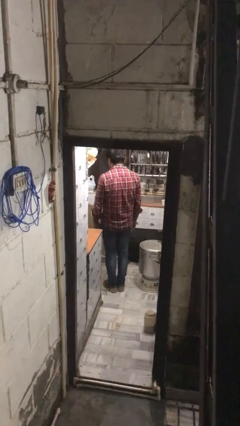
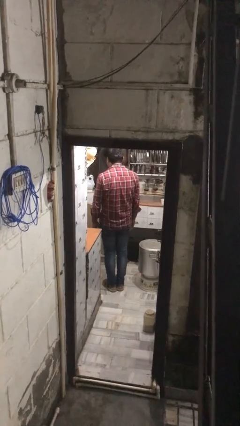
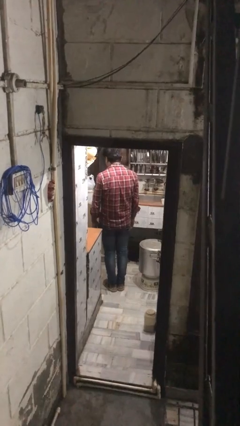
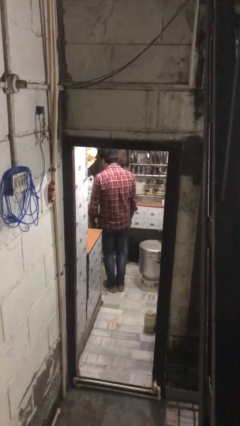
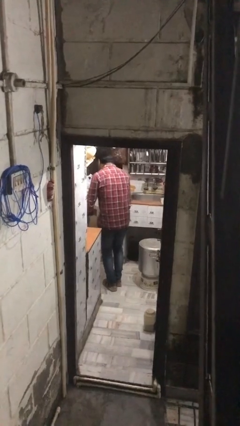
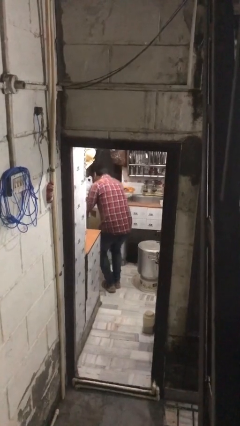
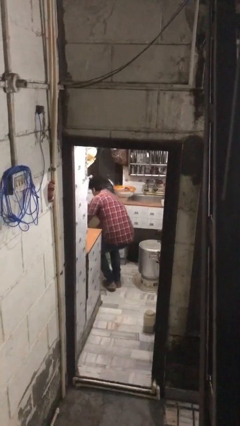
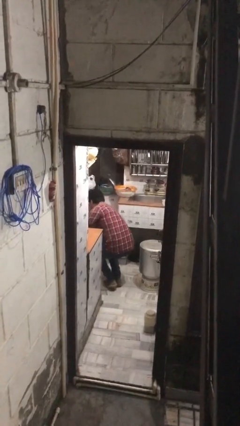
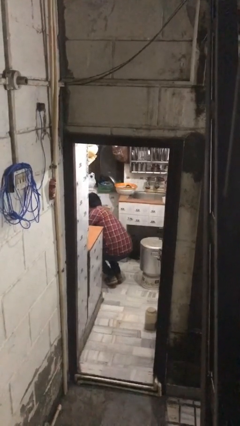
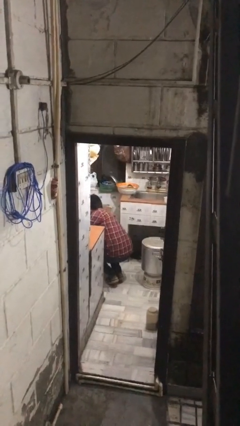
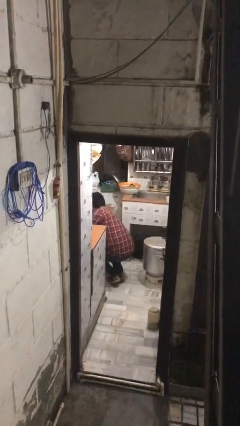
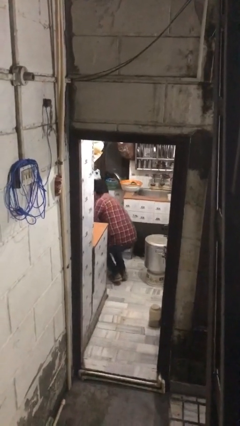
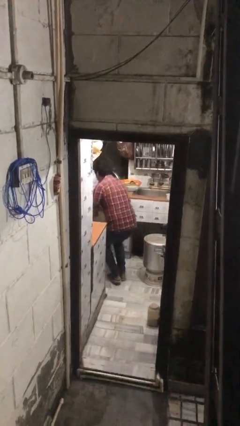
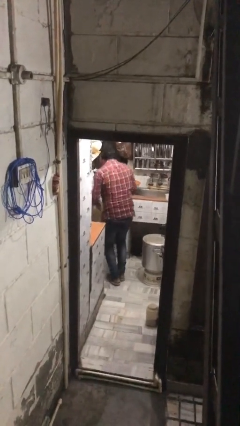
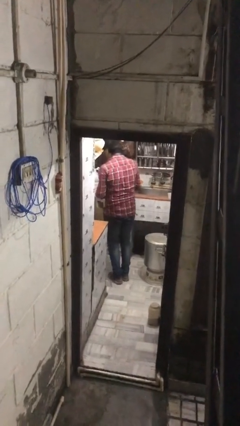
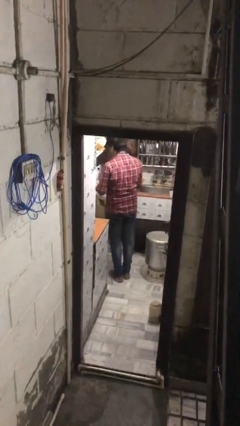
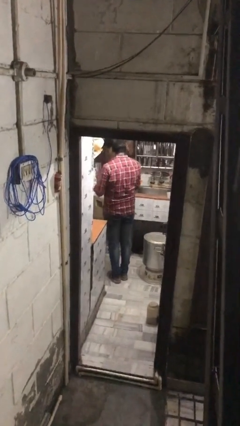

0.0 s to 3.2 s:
person takes object from kitchen drawer

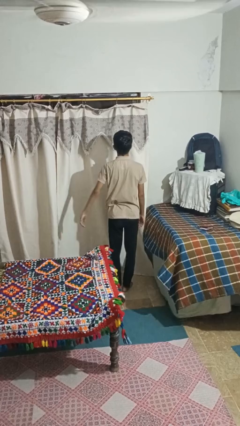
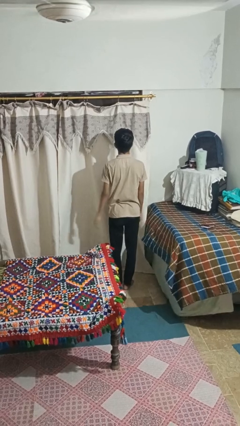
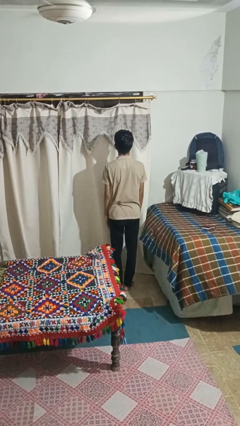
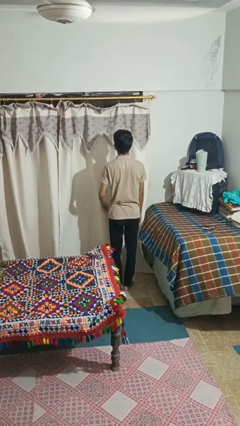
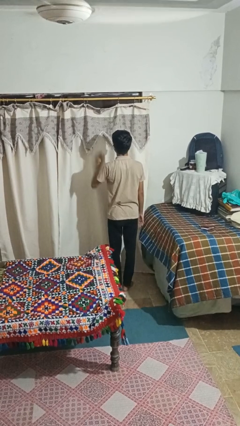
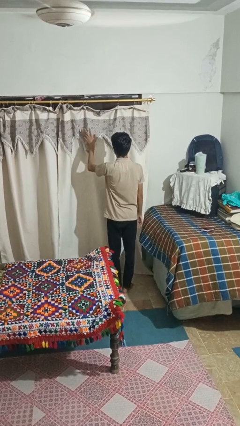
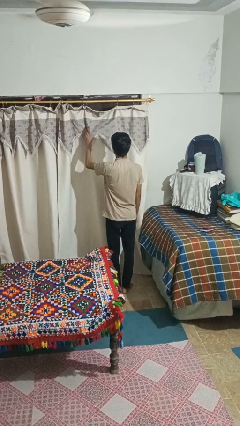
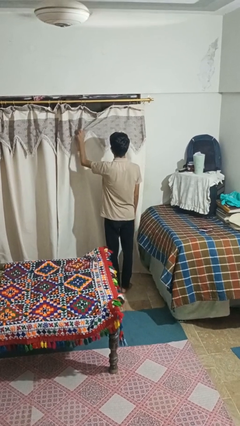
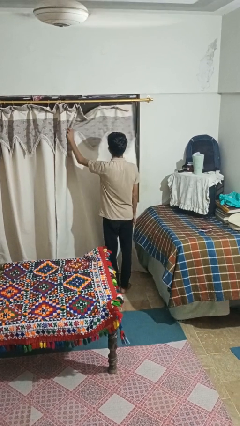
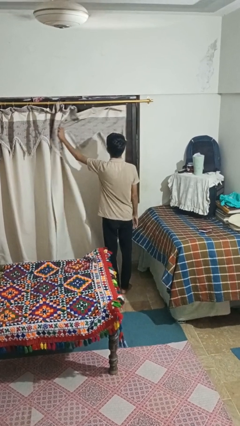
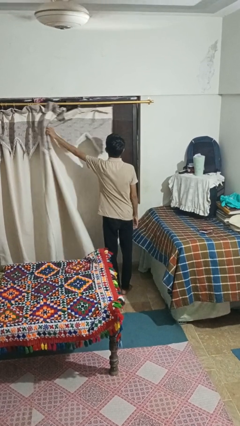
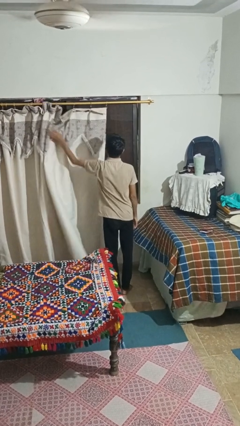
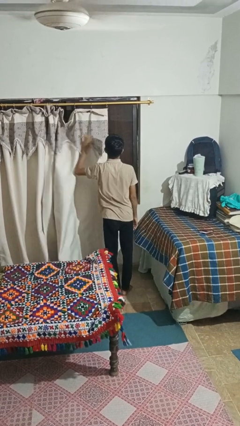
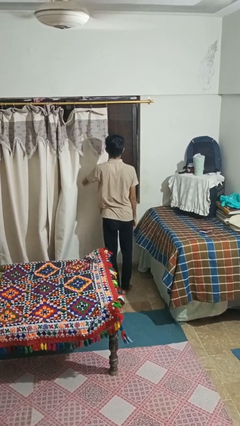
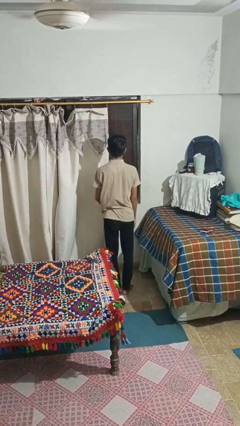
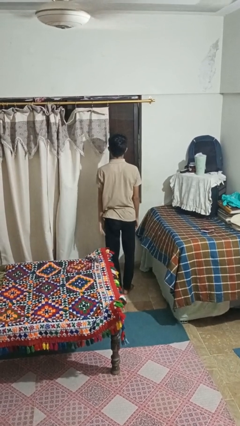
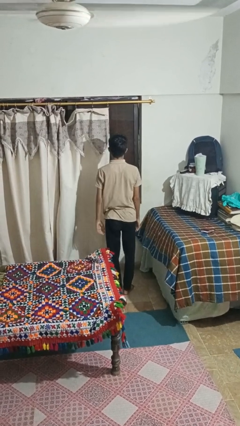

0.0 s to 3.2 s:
person opens curtains

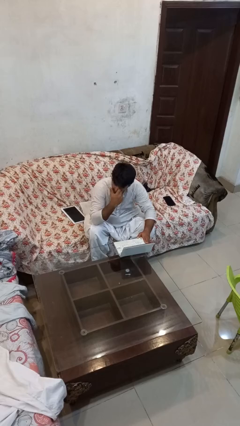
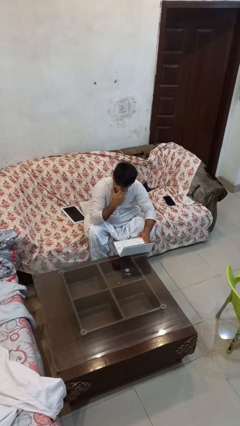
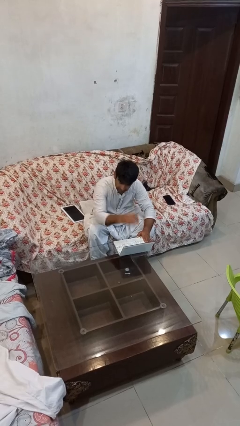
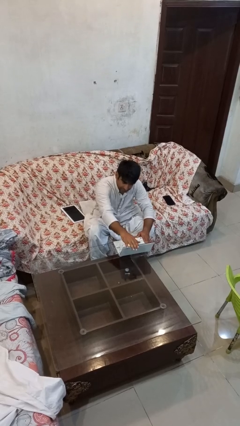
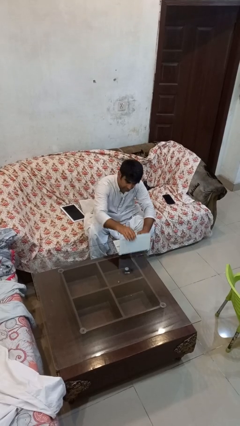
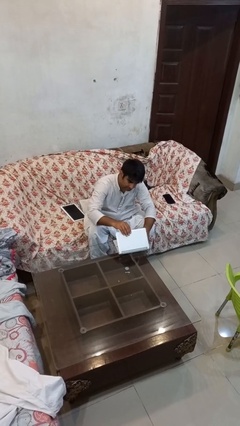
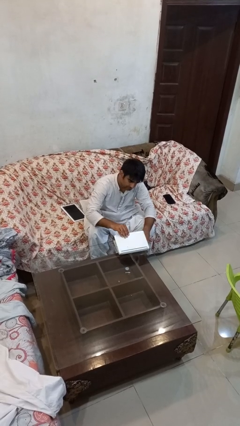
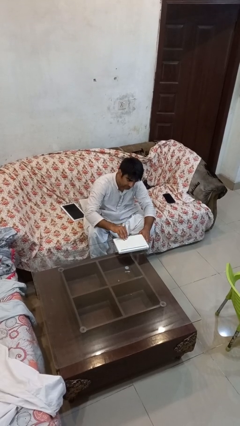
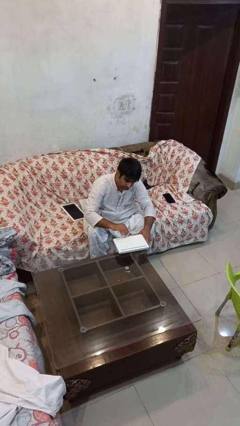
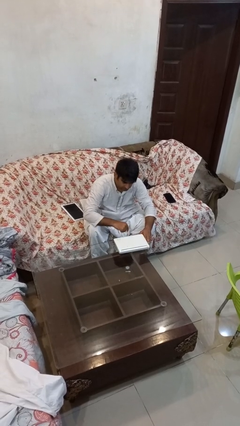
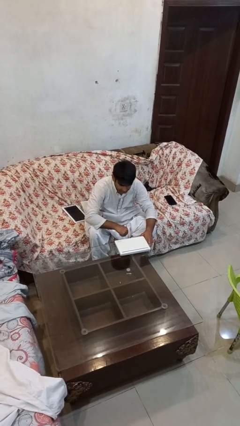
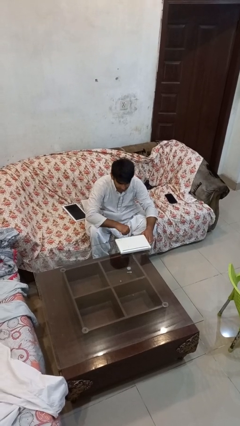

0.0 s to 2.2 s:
person closes laptop

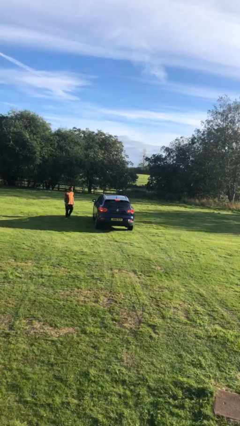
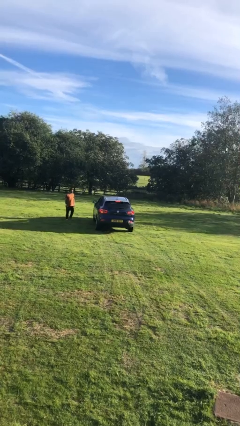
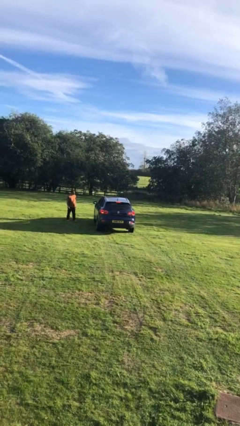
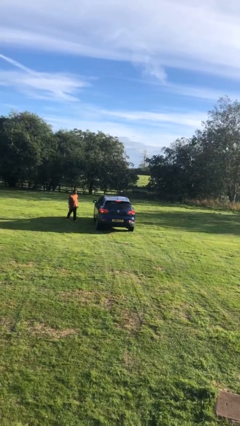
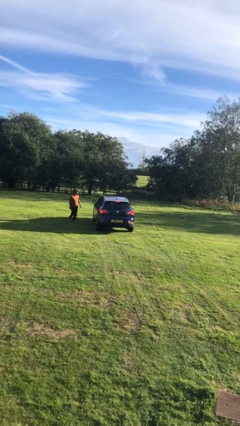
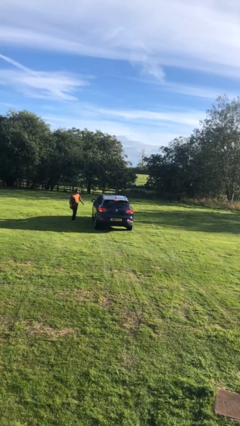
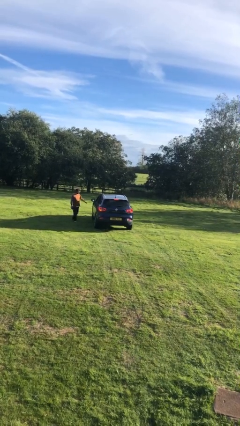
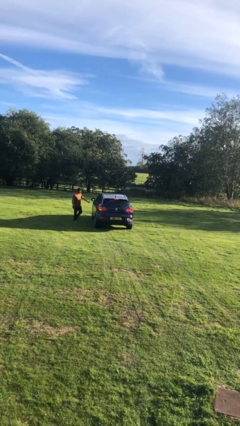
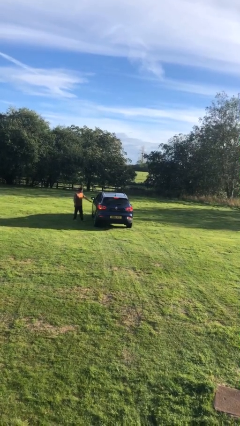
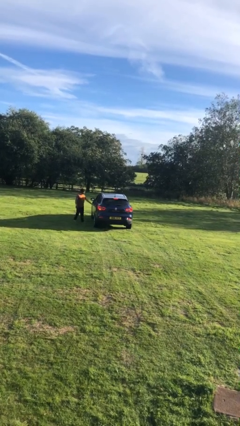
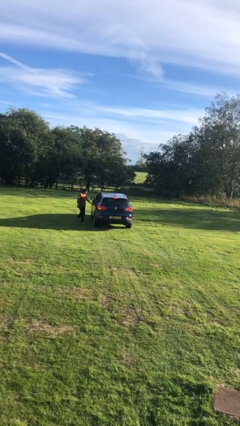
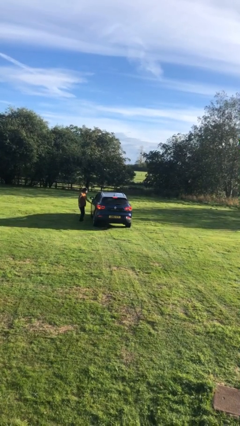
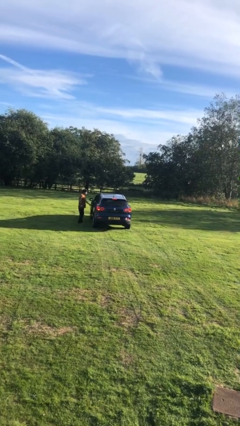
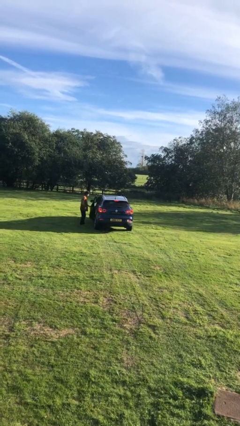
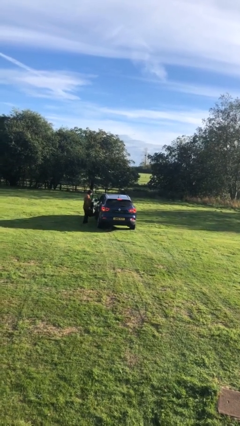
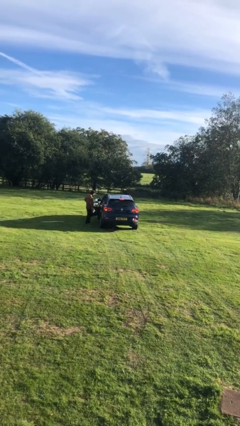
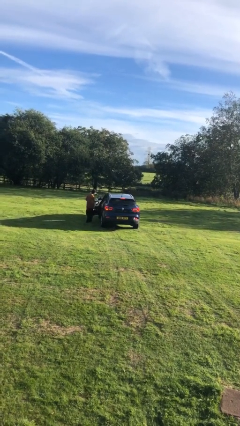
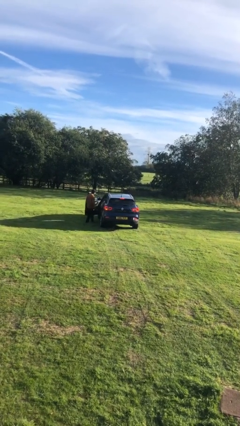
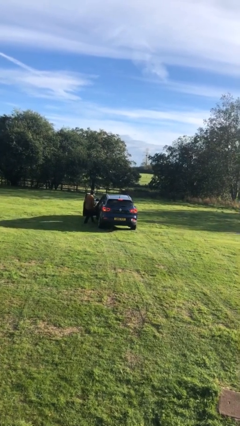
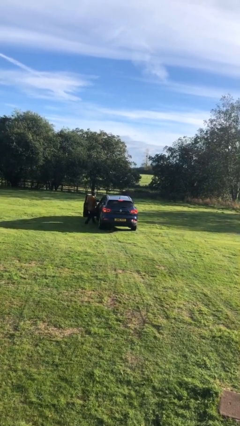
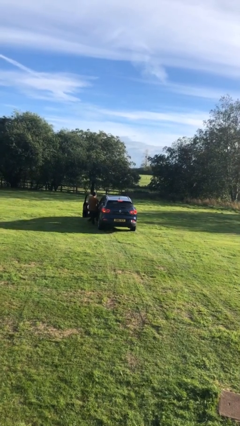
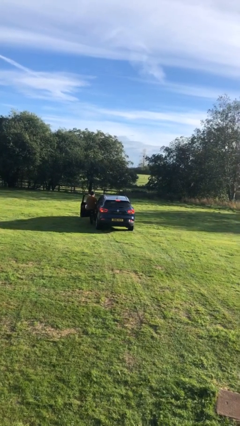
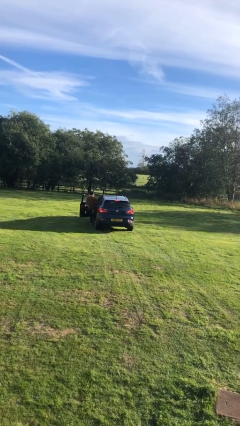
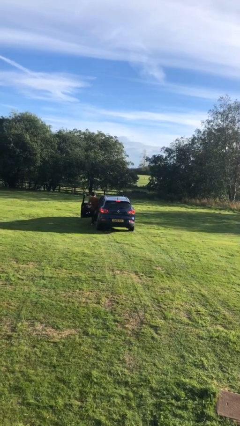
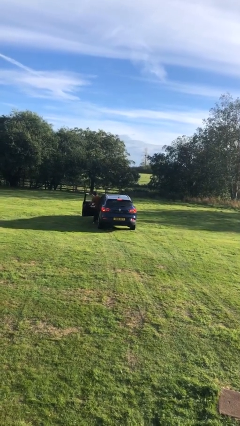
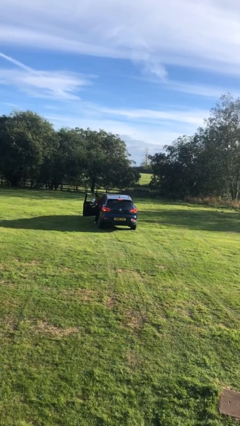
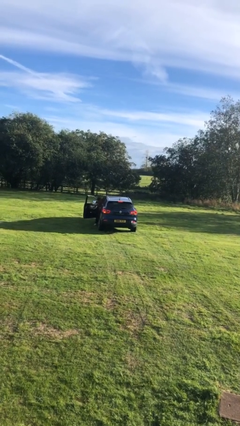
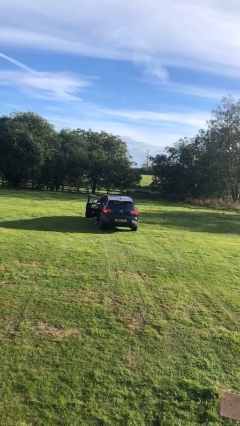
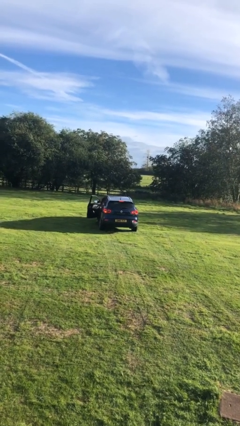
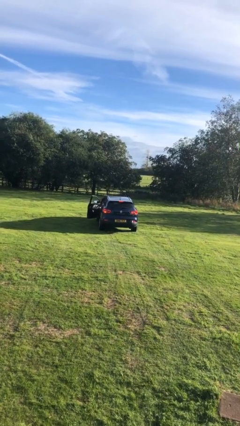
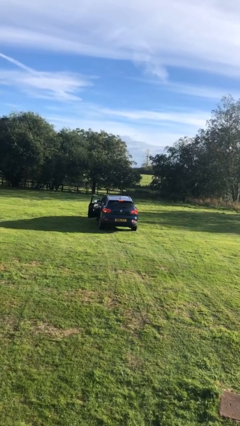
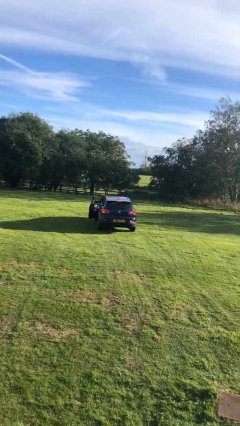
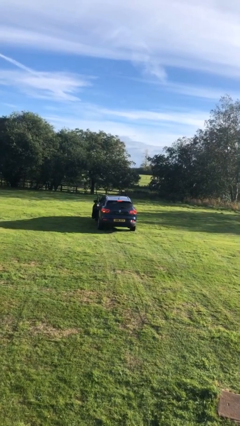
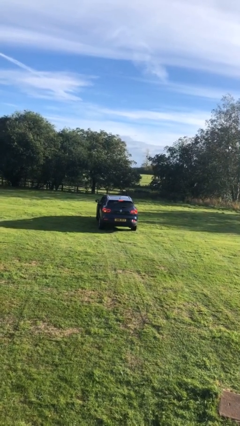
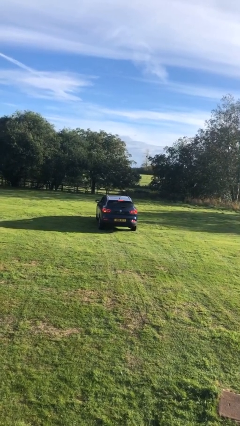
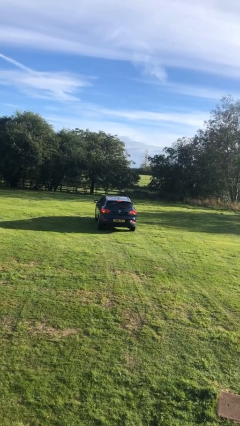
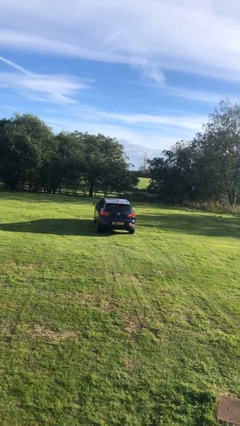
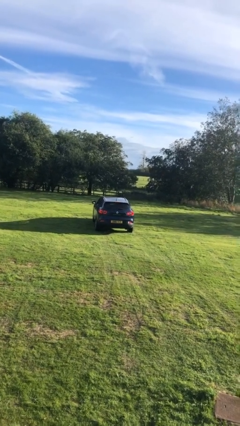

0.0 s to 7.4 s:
car picks up person

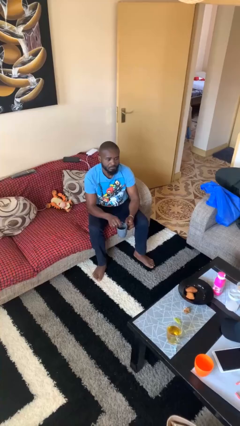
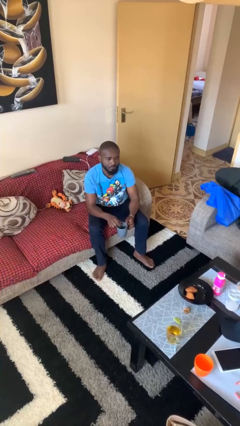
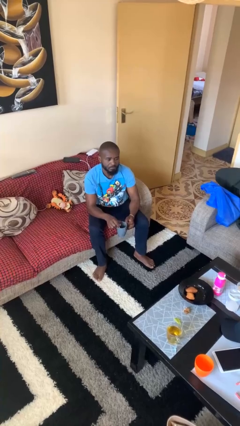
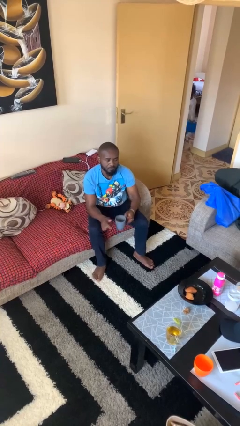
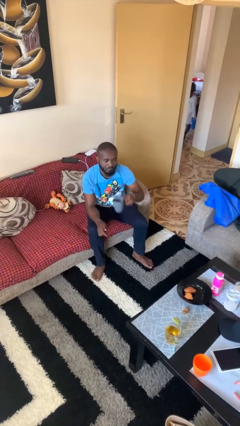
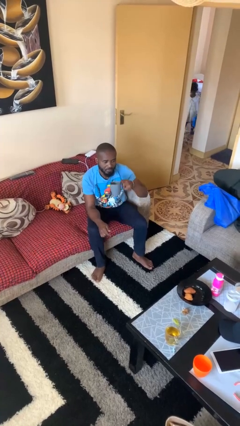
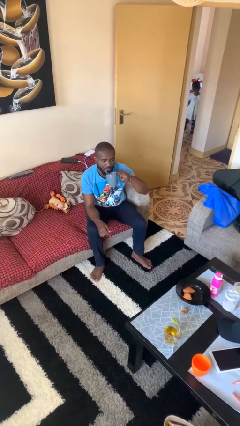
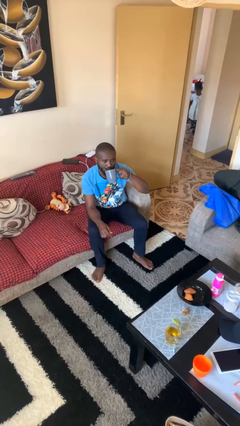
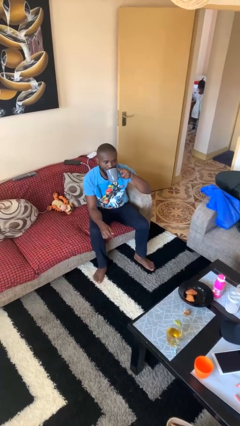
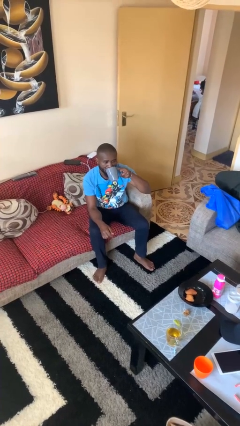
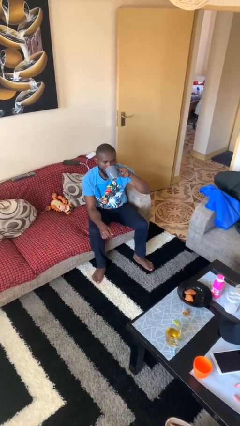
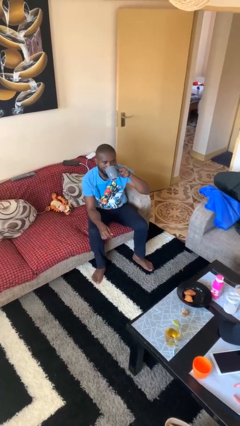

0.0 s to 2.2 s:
person drinks from mug
